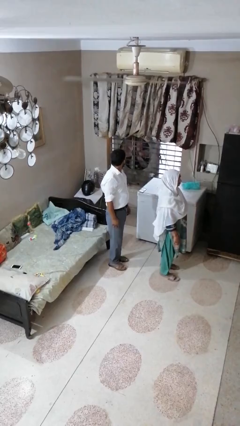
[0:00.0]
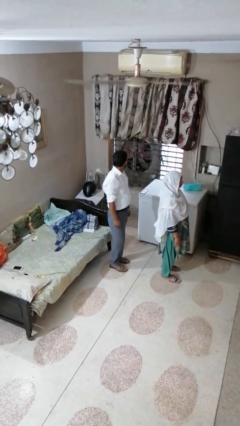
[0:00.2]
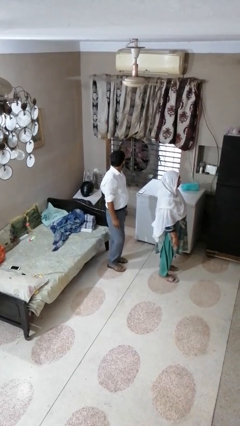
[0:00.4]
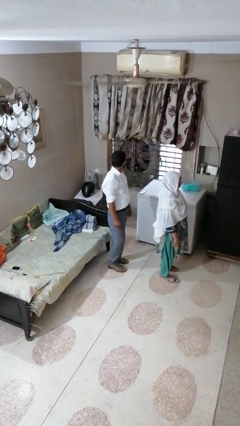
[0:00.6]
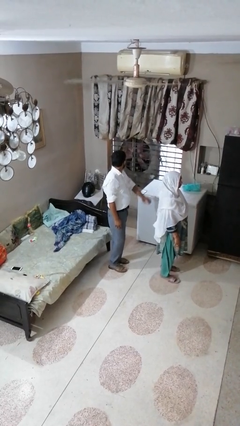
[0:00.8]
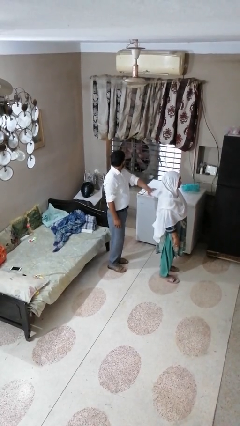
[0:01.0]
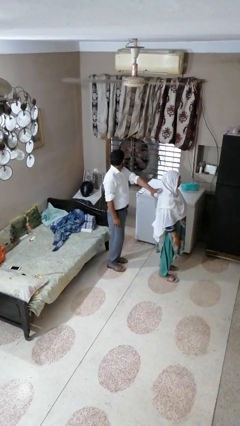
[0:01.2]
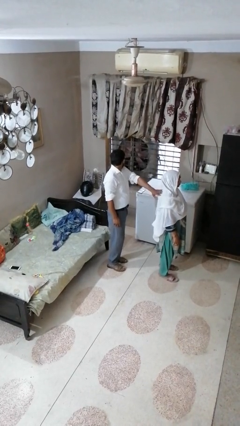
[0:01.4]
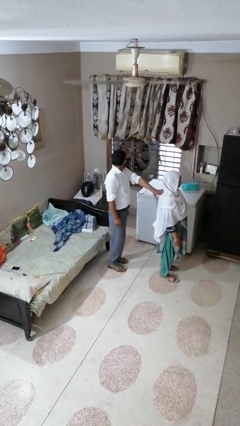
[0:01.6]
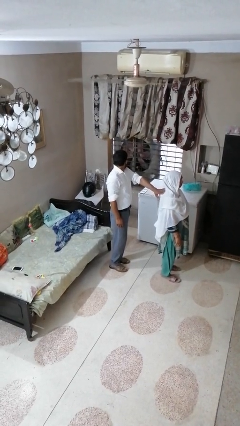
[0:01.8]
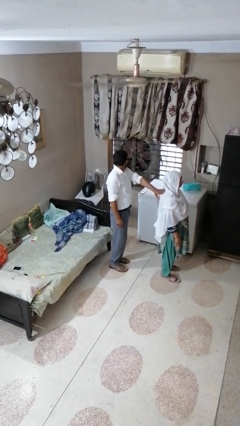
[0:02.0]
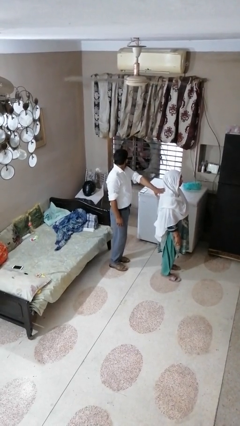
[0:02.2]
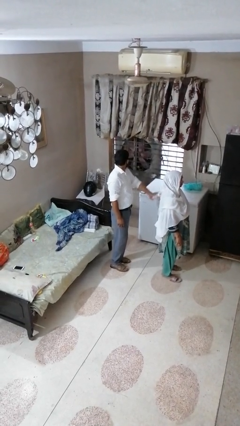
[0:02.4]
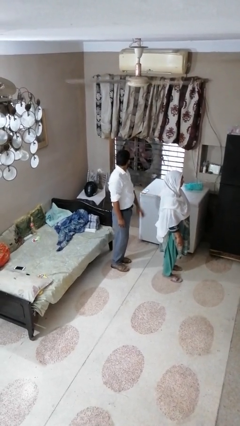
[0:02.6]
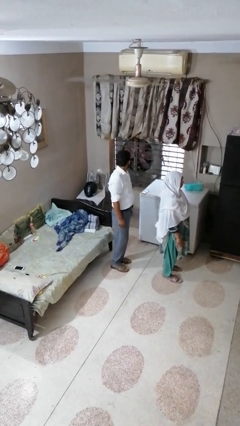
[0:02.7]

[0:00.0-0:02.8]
person touches back of person

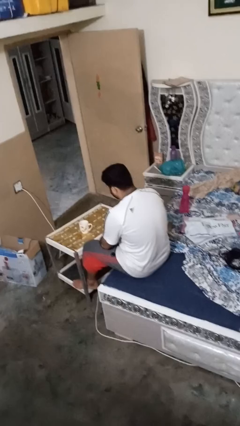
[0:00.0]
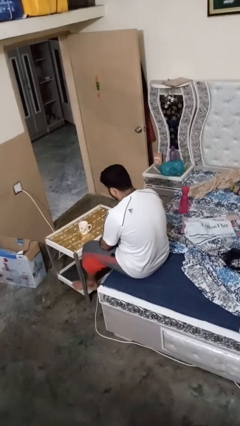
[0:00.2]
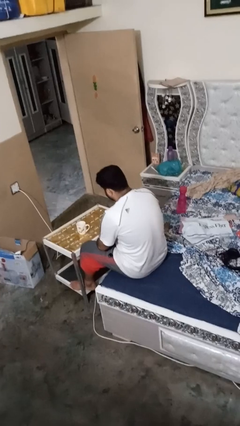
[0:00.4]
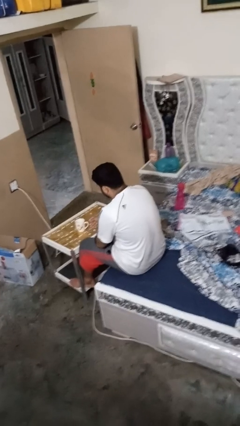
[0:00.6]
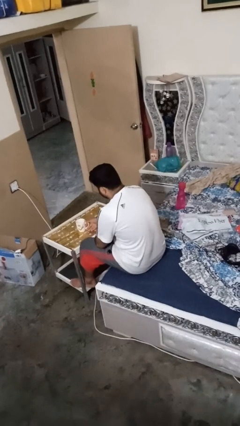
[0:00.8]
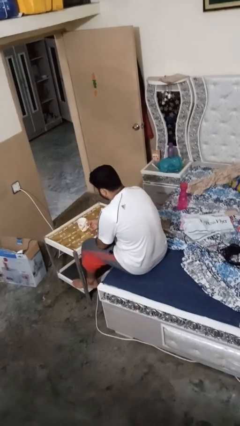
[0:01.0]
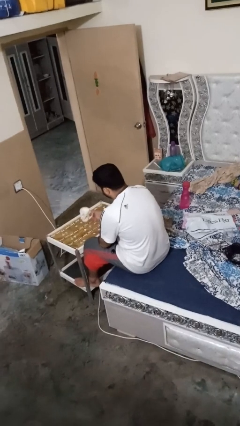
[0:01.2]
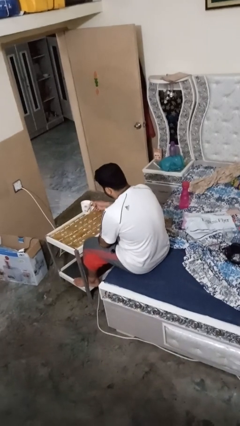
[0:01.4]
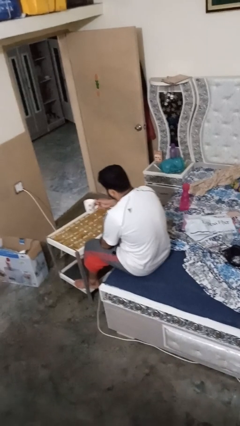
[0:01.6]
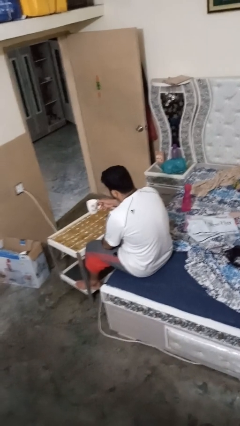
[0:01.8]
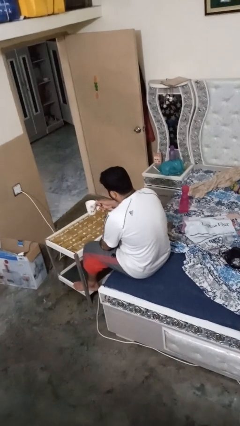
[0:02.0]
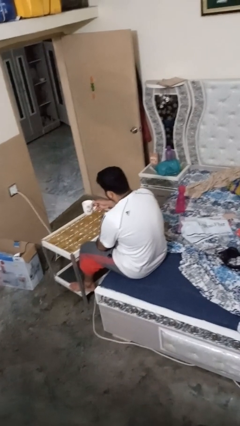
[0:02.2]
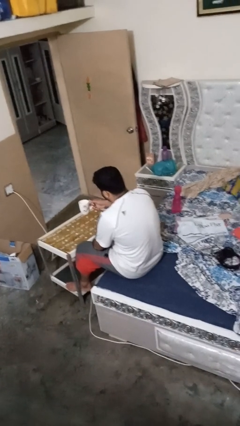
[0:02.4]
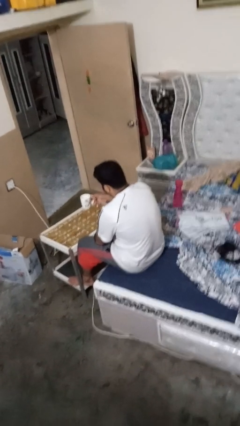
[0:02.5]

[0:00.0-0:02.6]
person picks up object from table

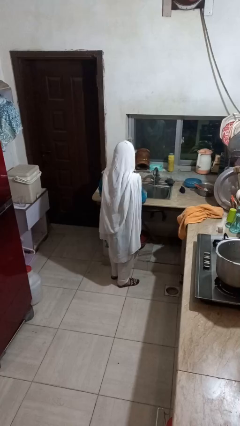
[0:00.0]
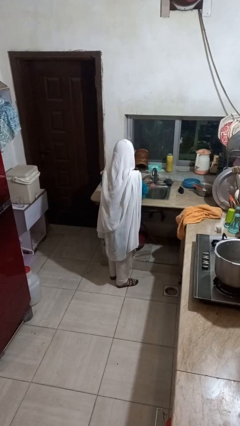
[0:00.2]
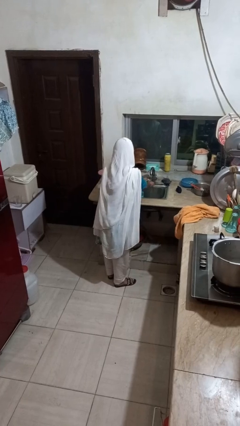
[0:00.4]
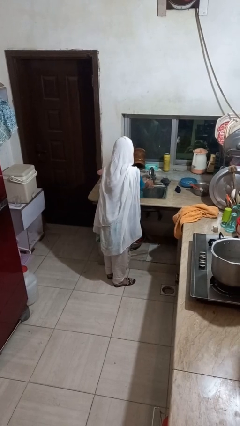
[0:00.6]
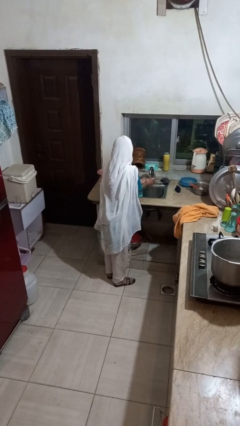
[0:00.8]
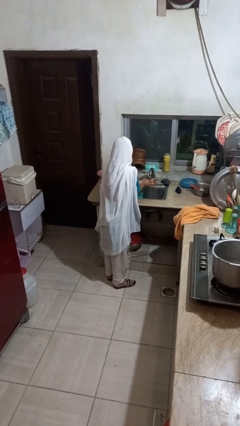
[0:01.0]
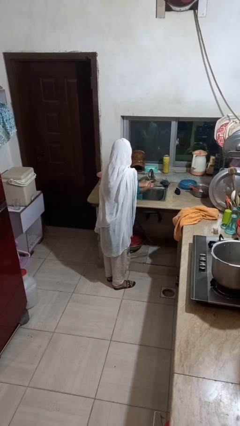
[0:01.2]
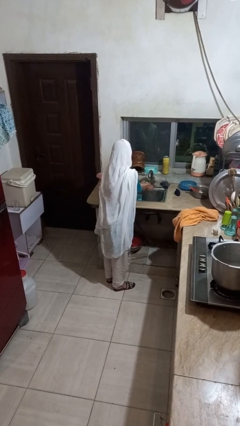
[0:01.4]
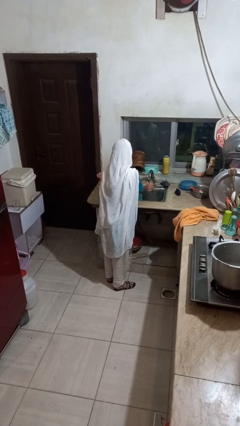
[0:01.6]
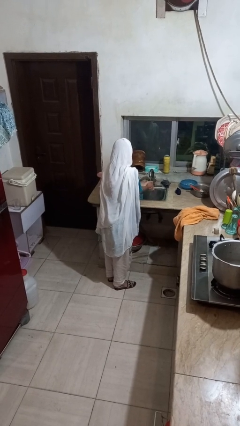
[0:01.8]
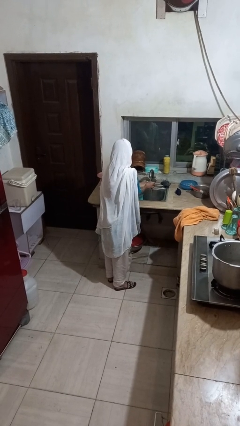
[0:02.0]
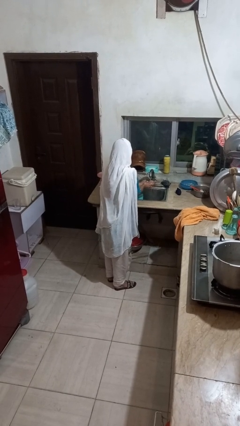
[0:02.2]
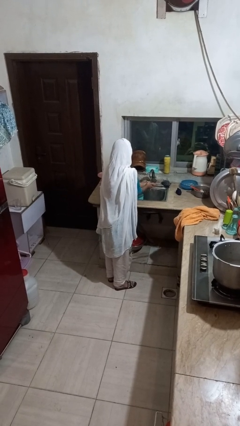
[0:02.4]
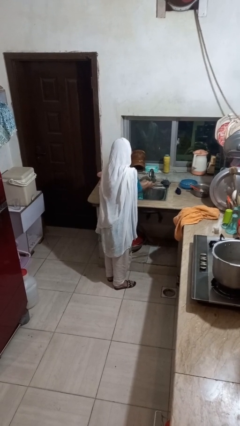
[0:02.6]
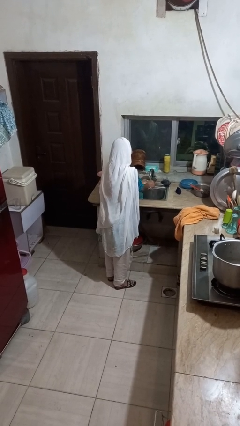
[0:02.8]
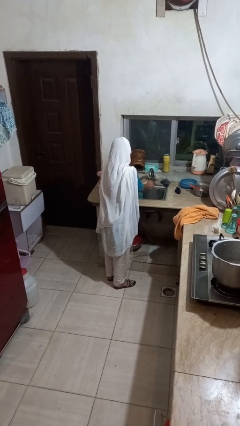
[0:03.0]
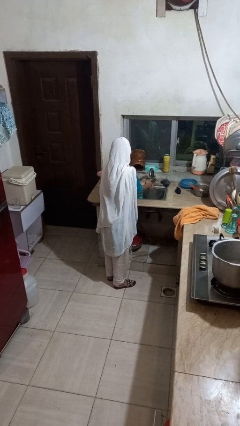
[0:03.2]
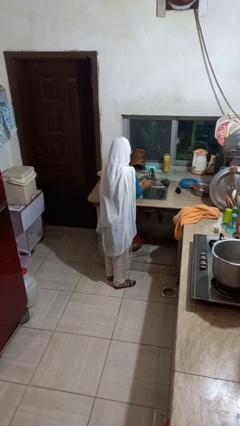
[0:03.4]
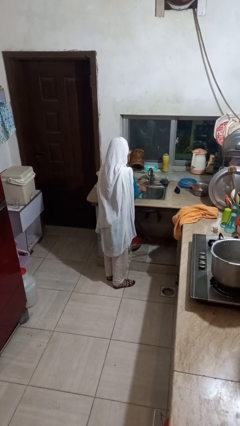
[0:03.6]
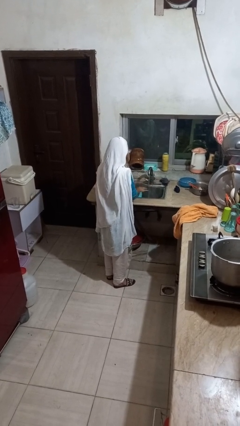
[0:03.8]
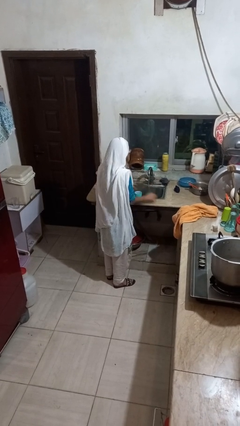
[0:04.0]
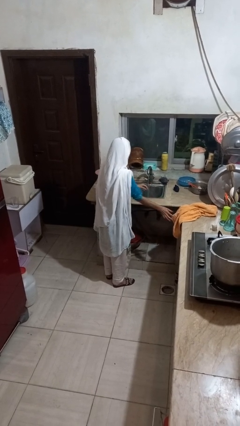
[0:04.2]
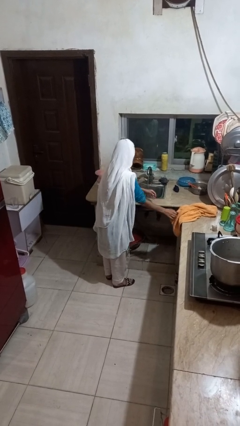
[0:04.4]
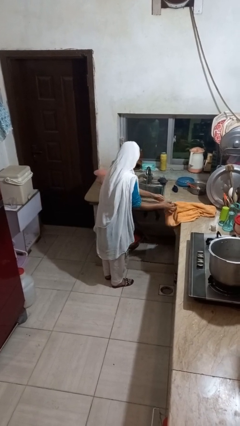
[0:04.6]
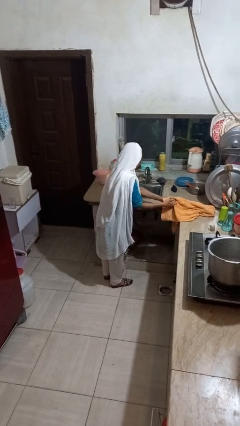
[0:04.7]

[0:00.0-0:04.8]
person washes hands

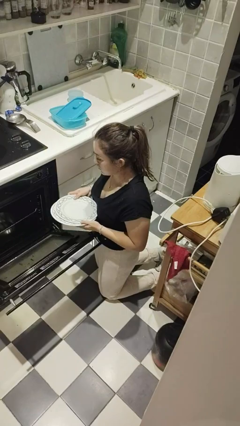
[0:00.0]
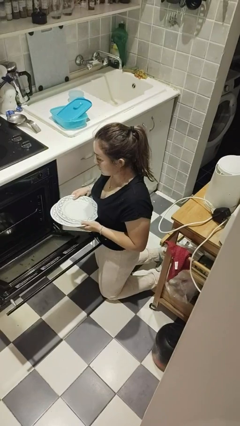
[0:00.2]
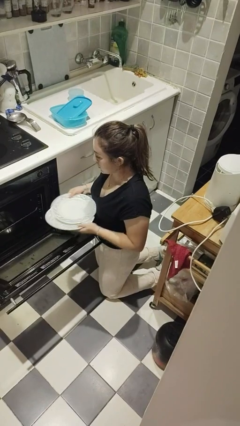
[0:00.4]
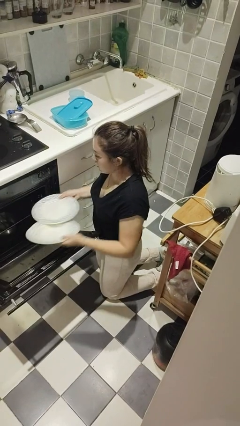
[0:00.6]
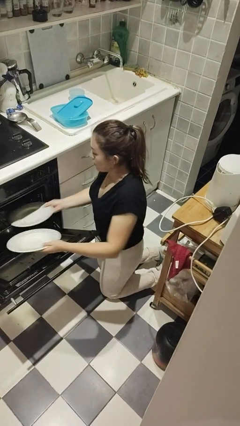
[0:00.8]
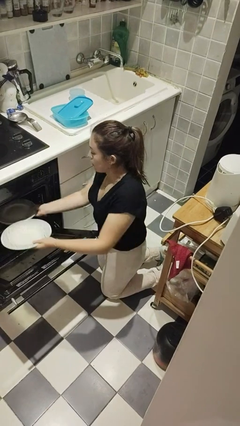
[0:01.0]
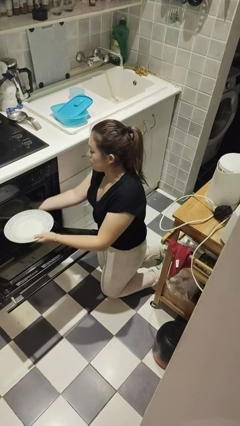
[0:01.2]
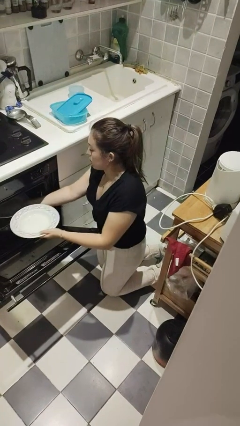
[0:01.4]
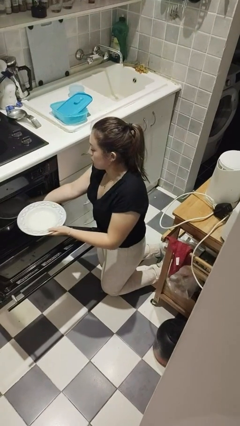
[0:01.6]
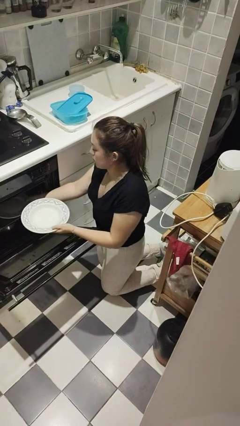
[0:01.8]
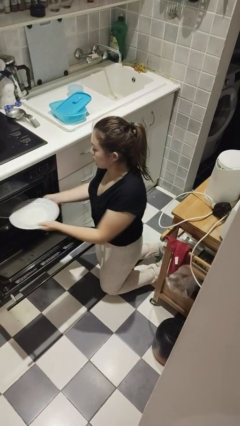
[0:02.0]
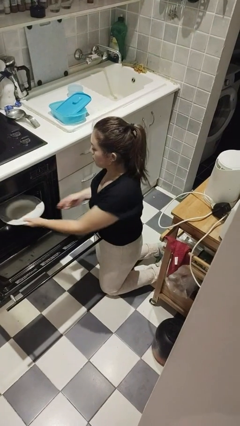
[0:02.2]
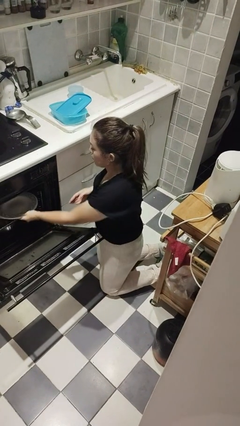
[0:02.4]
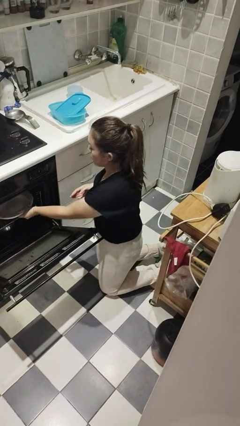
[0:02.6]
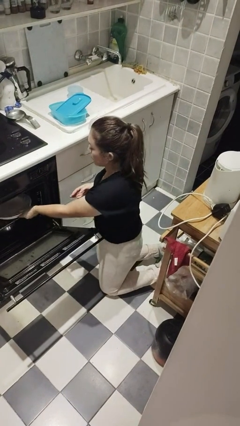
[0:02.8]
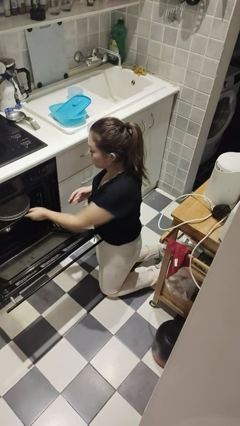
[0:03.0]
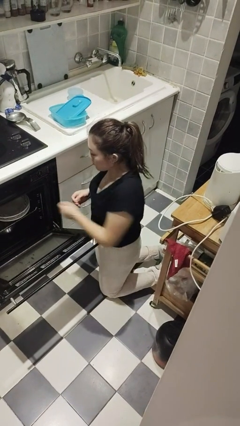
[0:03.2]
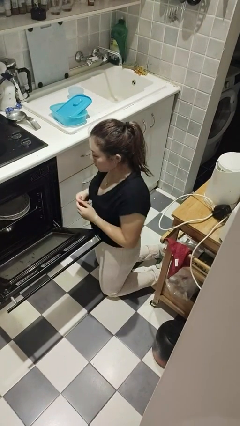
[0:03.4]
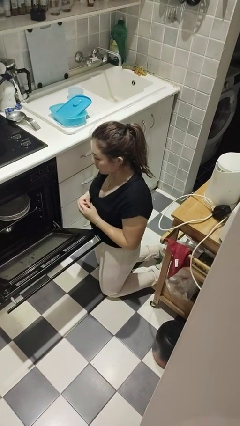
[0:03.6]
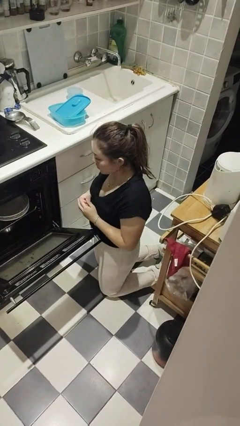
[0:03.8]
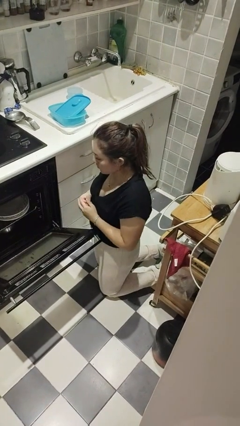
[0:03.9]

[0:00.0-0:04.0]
person loads dishwasher

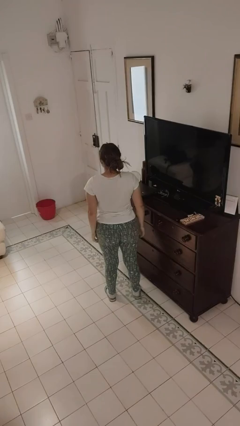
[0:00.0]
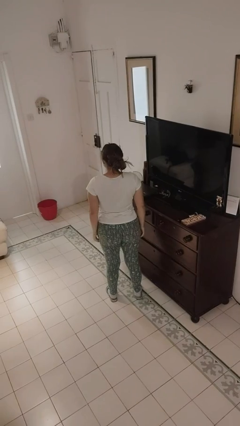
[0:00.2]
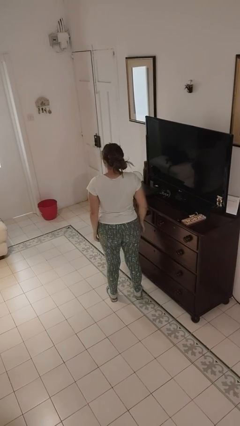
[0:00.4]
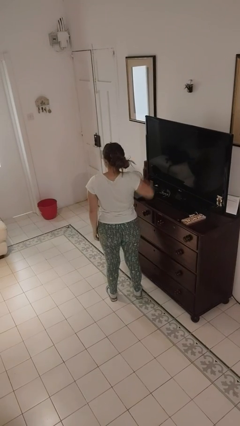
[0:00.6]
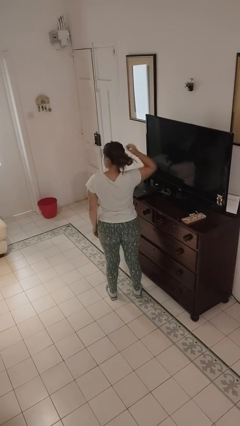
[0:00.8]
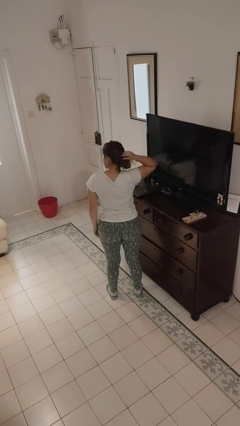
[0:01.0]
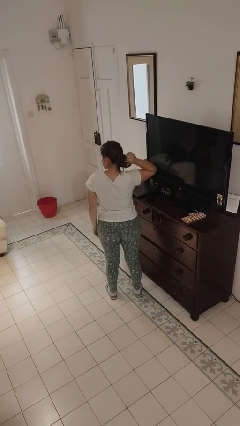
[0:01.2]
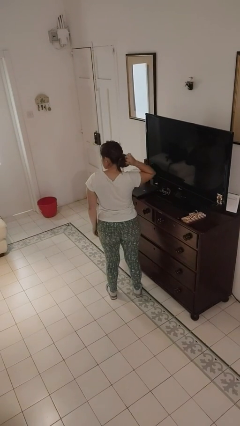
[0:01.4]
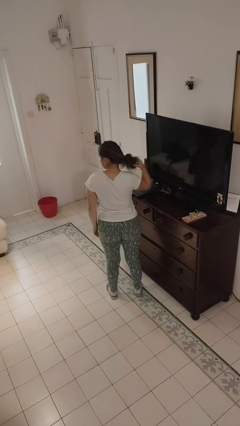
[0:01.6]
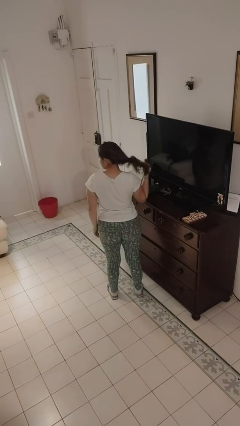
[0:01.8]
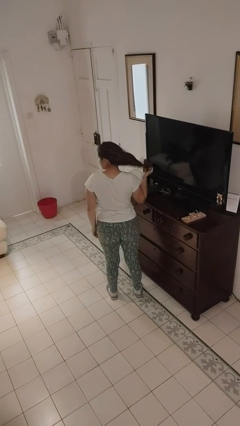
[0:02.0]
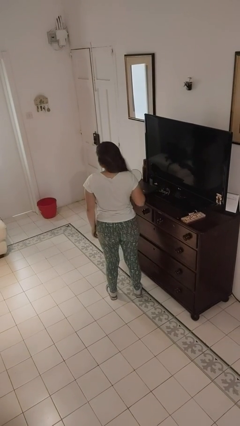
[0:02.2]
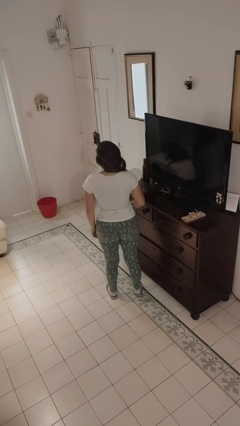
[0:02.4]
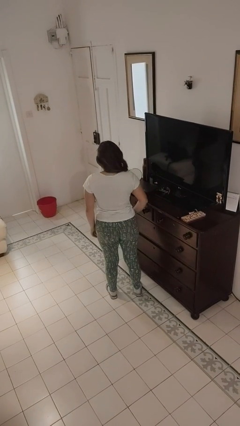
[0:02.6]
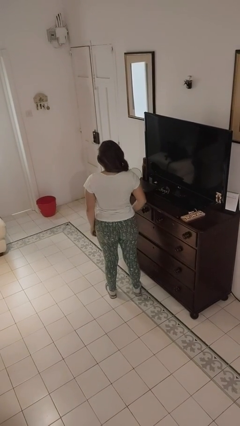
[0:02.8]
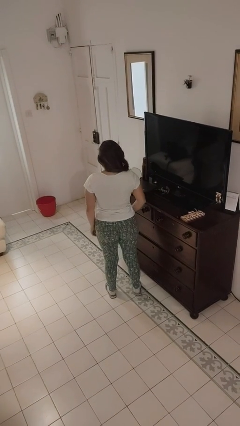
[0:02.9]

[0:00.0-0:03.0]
person takes off hairtie

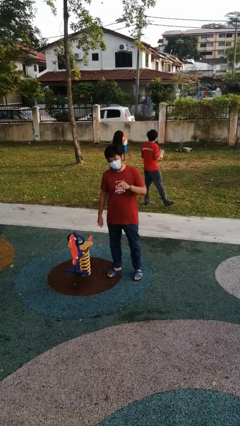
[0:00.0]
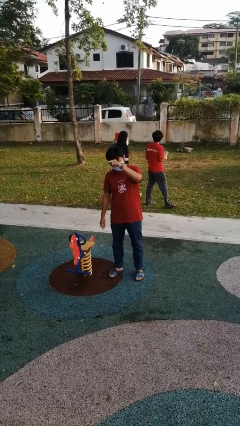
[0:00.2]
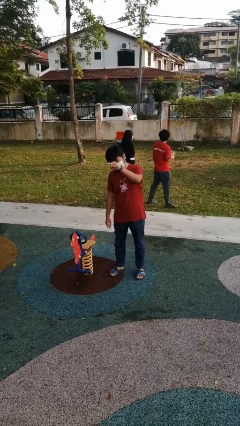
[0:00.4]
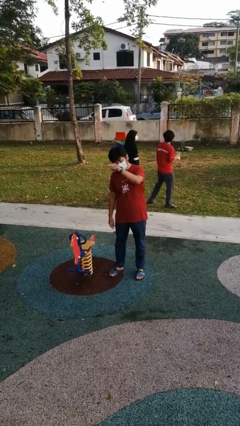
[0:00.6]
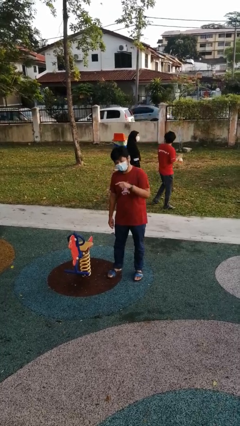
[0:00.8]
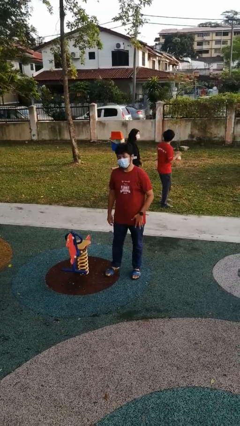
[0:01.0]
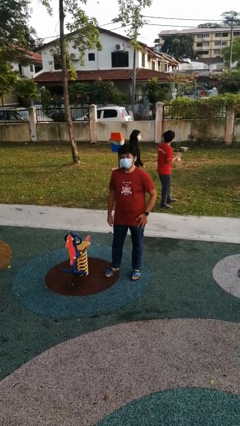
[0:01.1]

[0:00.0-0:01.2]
person points at person
